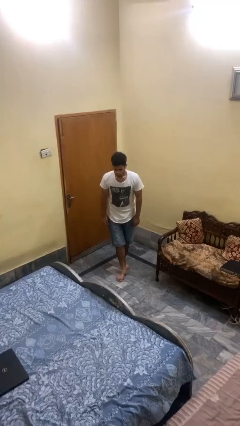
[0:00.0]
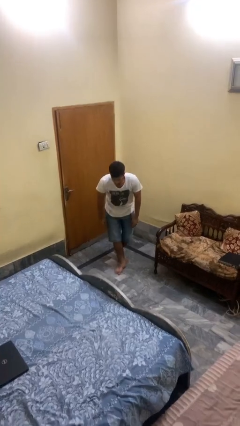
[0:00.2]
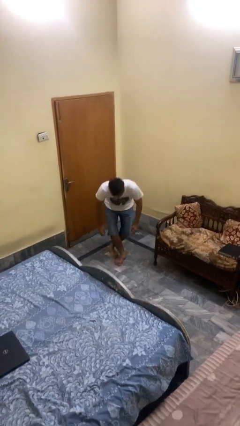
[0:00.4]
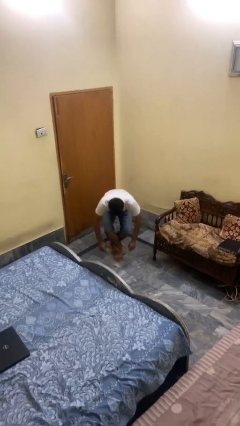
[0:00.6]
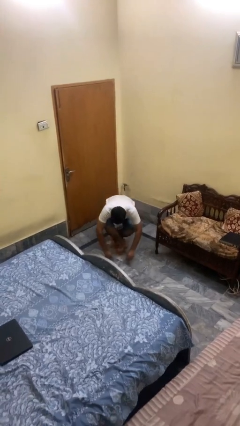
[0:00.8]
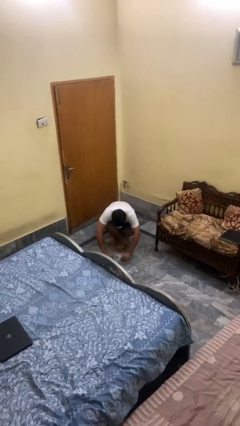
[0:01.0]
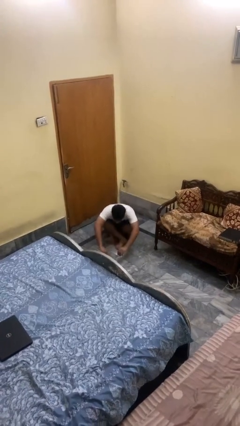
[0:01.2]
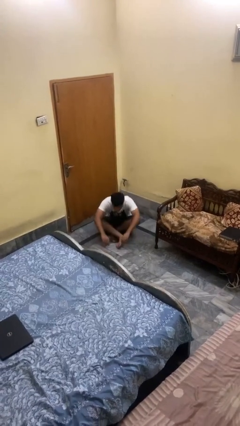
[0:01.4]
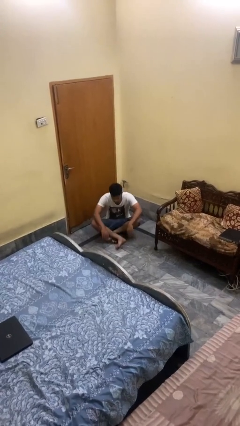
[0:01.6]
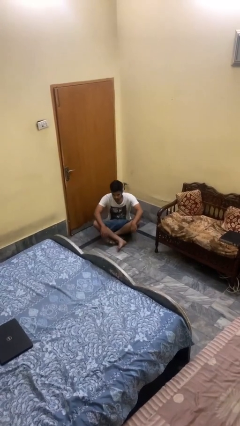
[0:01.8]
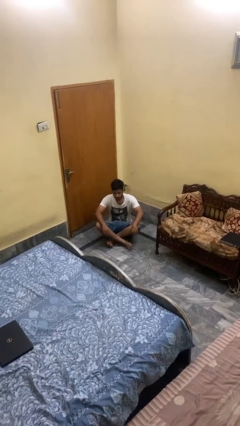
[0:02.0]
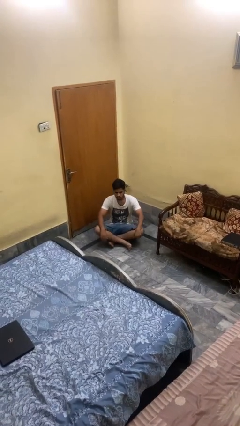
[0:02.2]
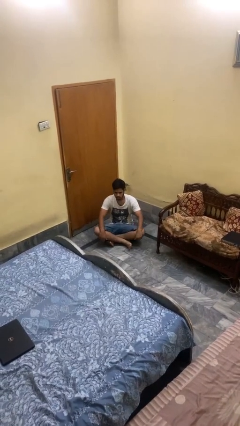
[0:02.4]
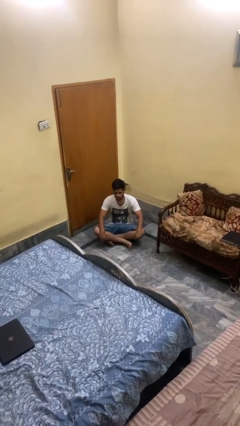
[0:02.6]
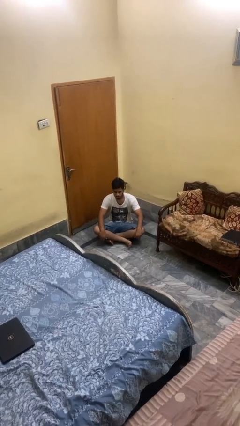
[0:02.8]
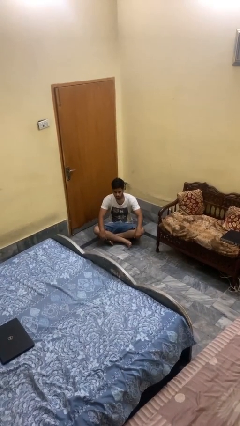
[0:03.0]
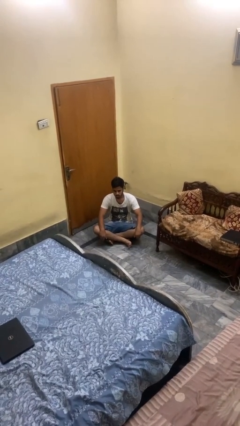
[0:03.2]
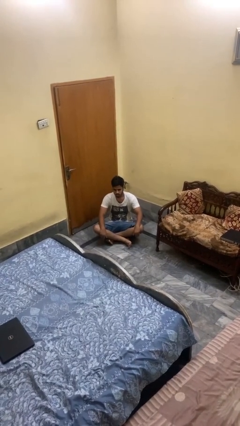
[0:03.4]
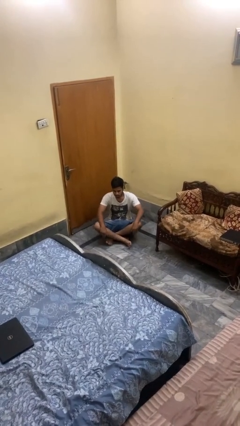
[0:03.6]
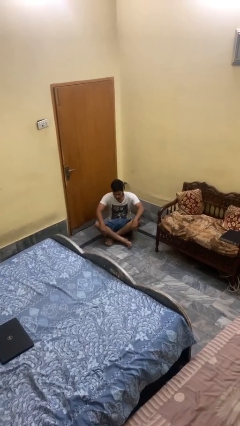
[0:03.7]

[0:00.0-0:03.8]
person sits crisscross

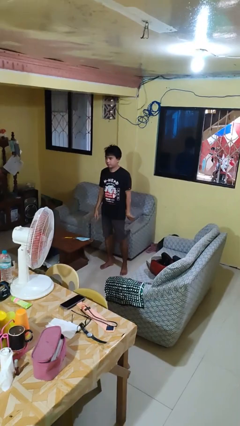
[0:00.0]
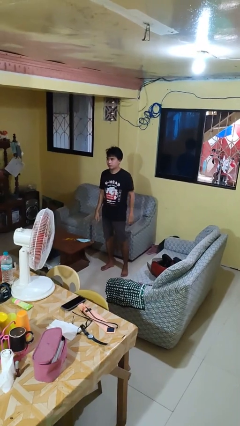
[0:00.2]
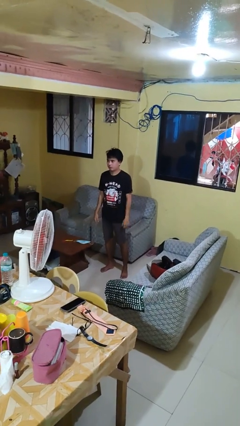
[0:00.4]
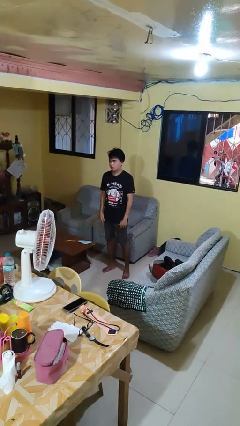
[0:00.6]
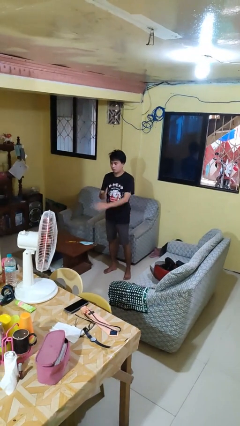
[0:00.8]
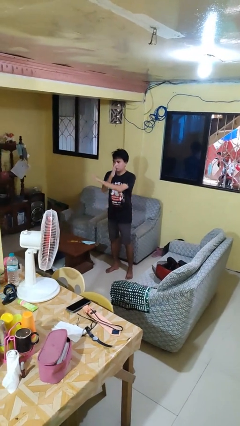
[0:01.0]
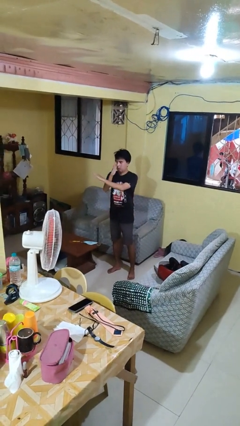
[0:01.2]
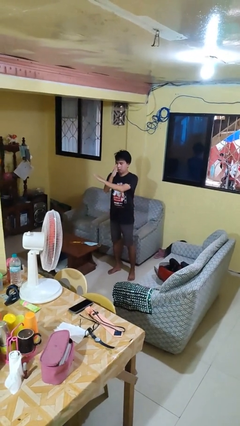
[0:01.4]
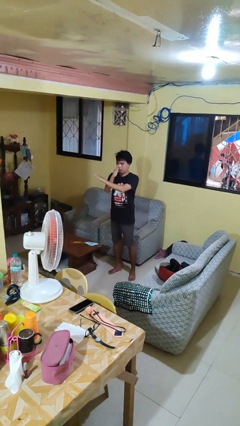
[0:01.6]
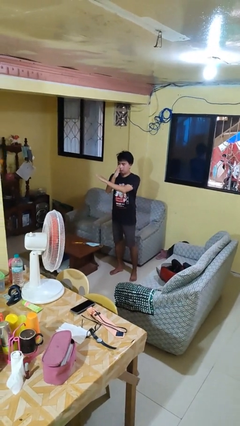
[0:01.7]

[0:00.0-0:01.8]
person gestures arms x

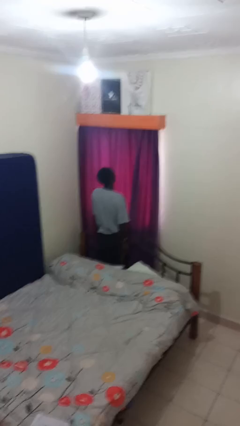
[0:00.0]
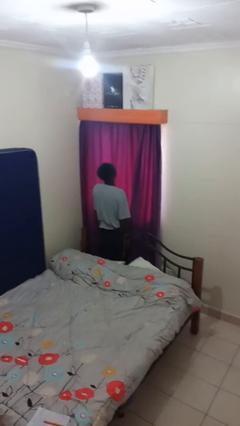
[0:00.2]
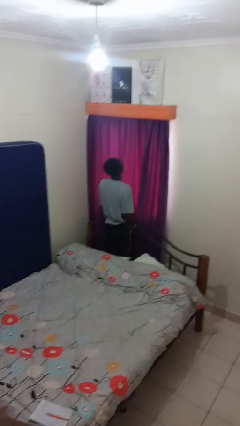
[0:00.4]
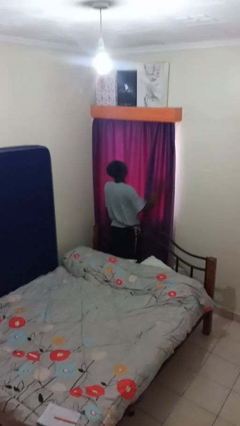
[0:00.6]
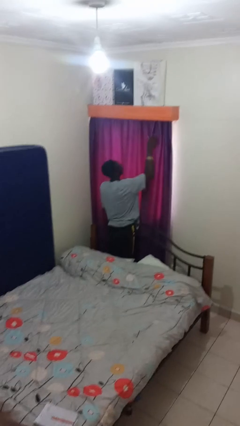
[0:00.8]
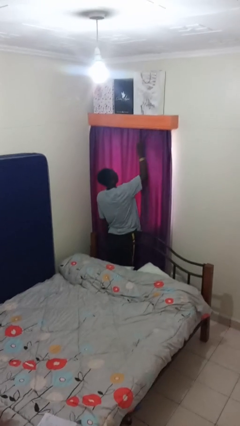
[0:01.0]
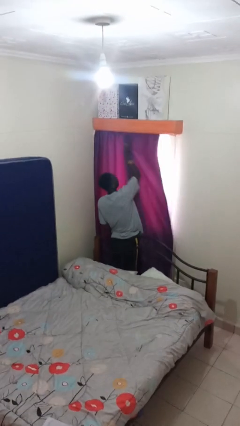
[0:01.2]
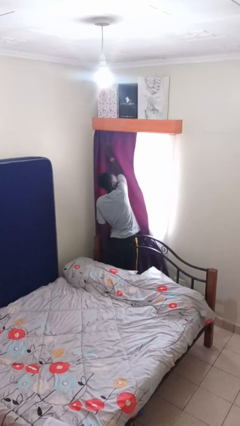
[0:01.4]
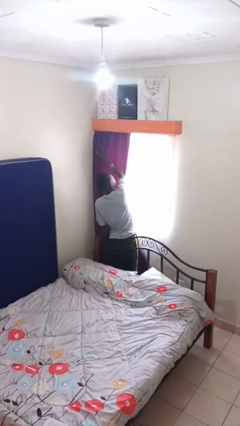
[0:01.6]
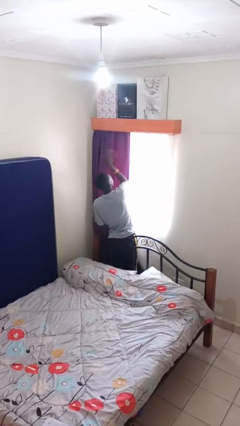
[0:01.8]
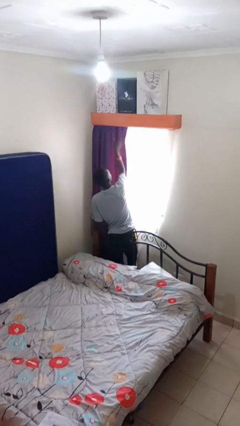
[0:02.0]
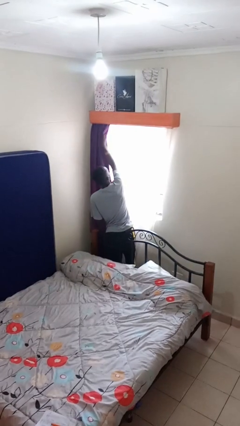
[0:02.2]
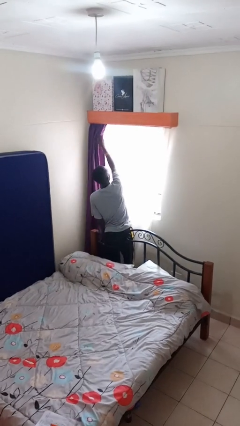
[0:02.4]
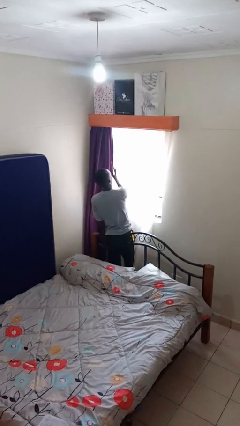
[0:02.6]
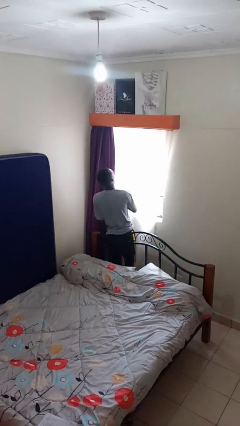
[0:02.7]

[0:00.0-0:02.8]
person opens curtains

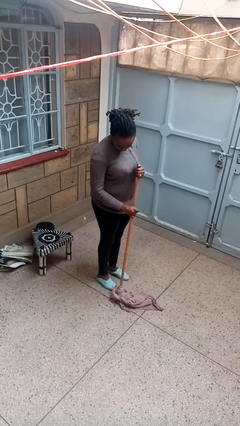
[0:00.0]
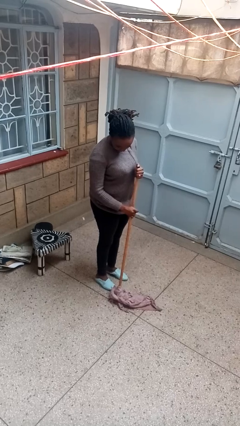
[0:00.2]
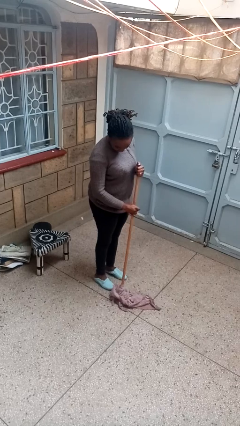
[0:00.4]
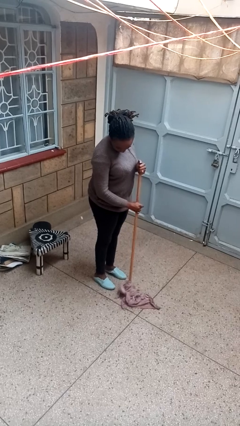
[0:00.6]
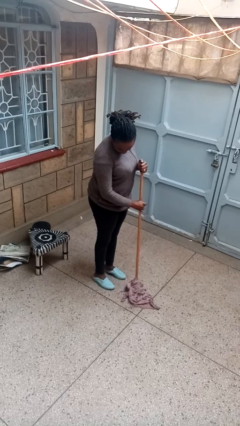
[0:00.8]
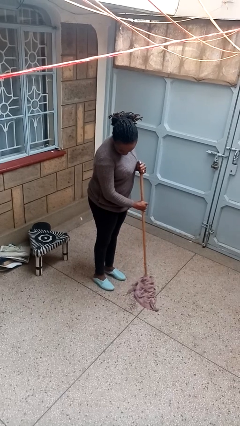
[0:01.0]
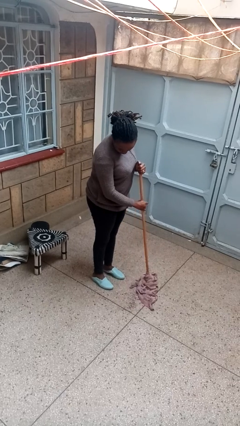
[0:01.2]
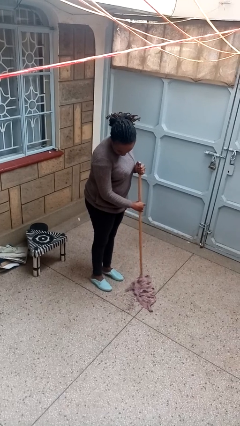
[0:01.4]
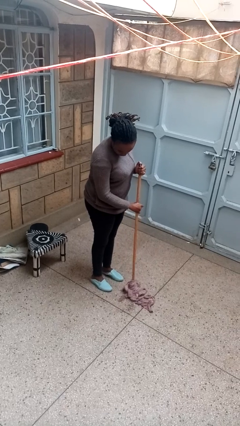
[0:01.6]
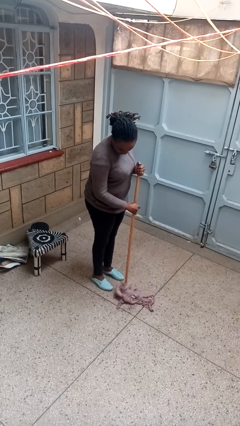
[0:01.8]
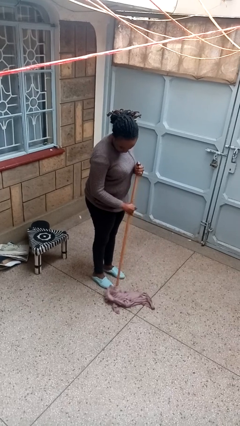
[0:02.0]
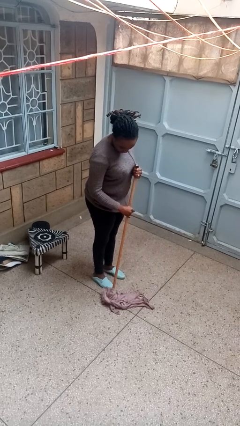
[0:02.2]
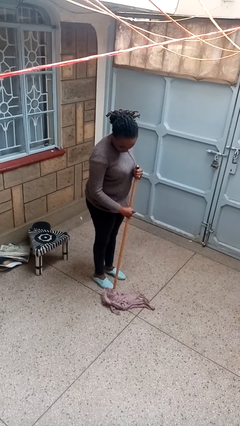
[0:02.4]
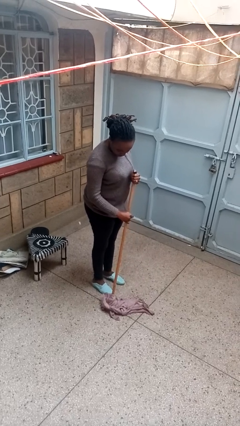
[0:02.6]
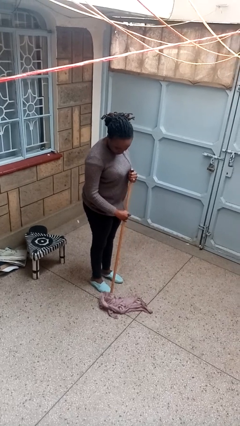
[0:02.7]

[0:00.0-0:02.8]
person mops

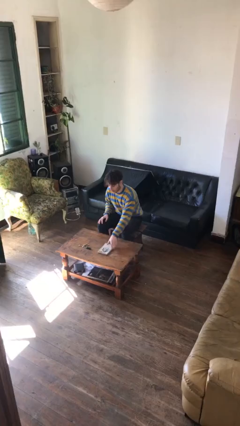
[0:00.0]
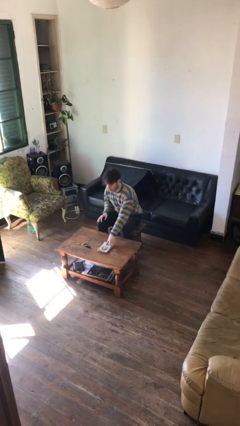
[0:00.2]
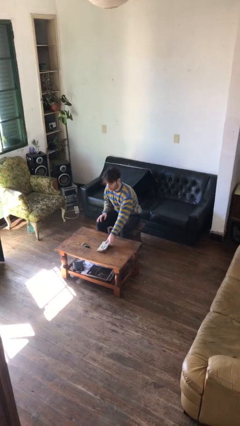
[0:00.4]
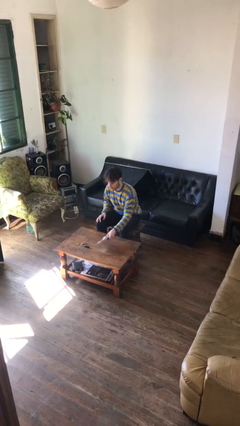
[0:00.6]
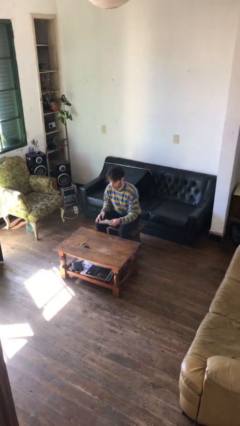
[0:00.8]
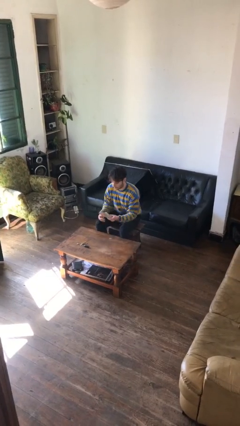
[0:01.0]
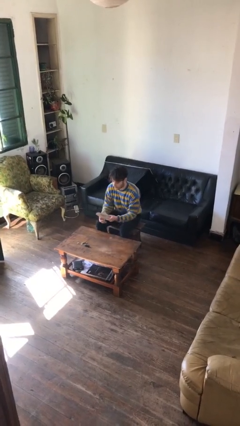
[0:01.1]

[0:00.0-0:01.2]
person picks up object from table

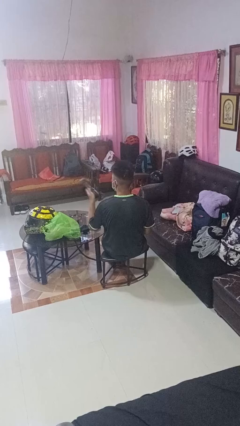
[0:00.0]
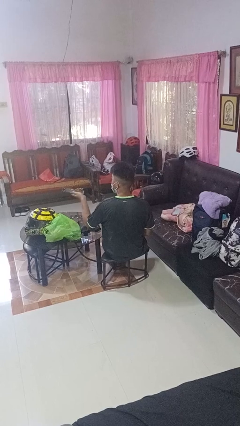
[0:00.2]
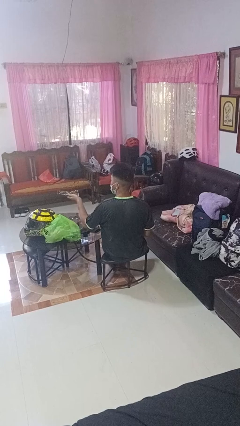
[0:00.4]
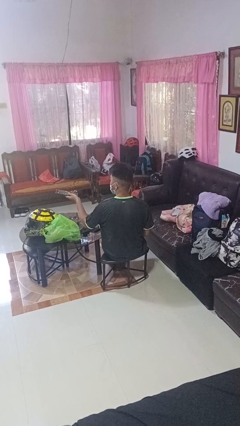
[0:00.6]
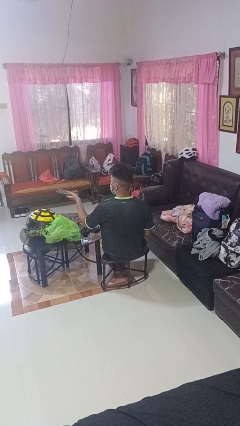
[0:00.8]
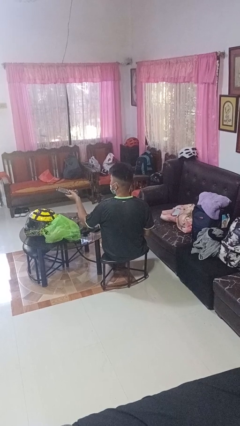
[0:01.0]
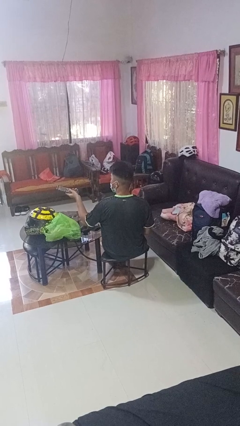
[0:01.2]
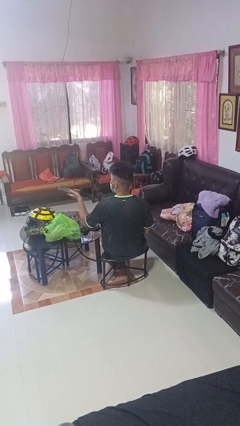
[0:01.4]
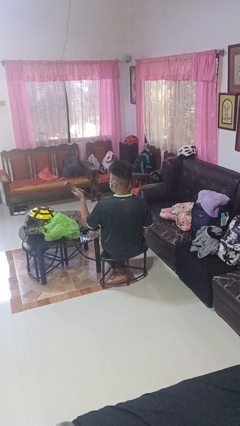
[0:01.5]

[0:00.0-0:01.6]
person uses television remote

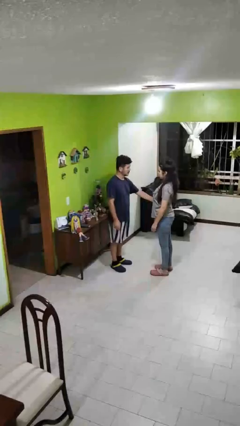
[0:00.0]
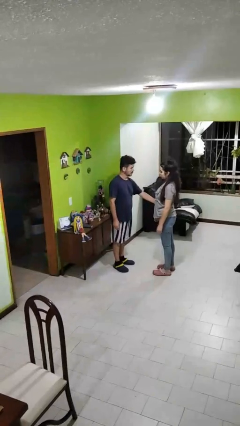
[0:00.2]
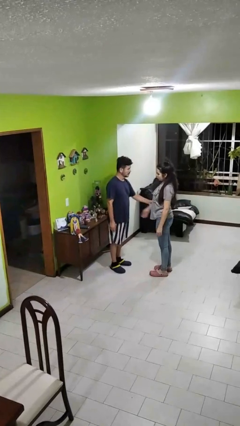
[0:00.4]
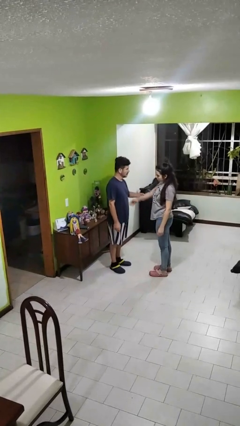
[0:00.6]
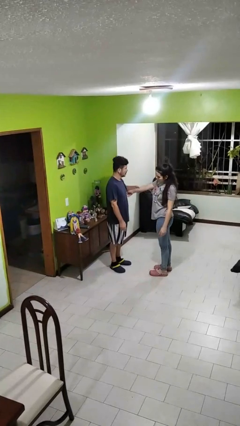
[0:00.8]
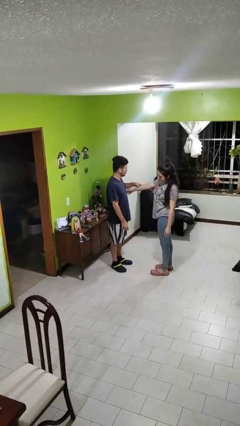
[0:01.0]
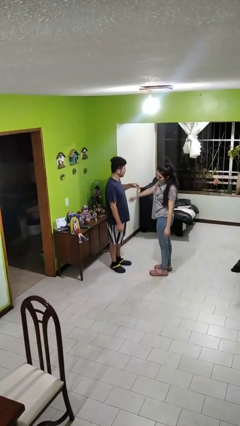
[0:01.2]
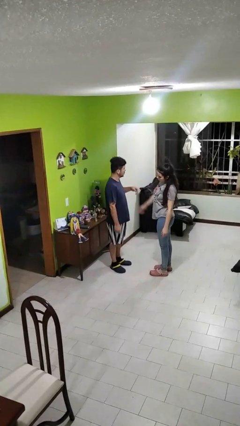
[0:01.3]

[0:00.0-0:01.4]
person grabs person by forearm

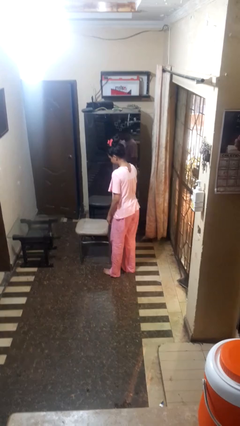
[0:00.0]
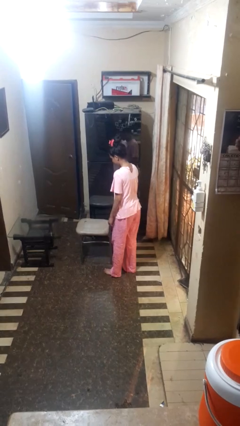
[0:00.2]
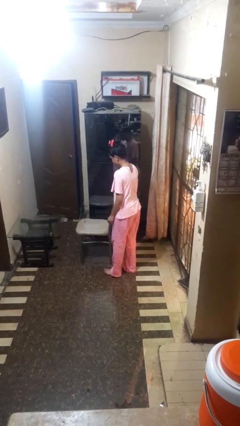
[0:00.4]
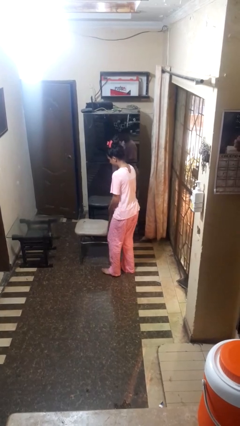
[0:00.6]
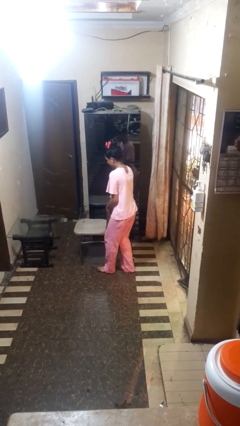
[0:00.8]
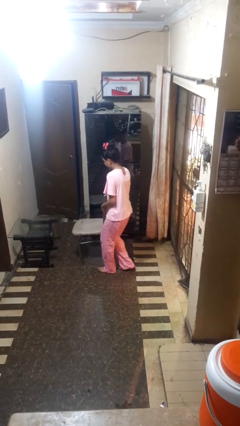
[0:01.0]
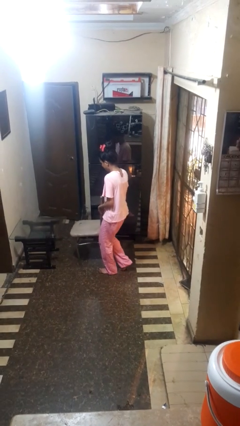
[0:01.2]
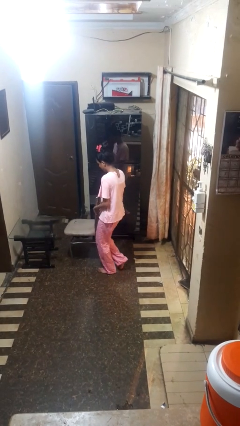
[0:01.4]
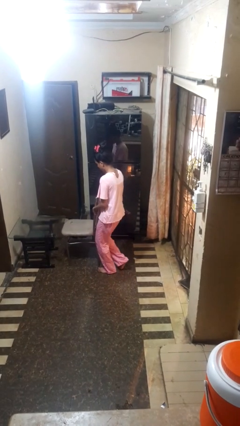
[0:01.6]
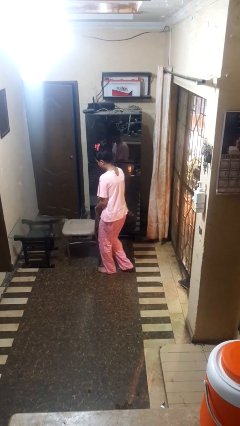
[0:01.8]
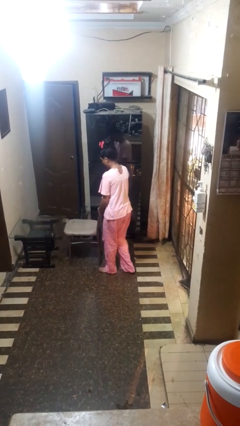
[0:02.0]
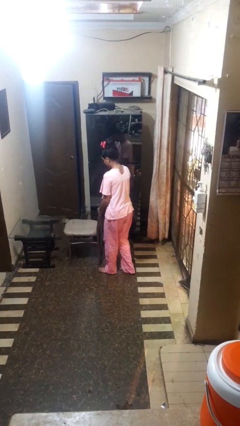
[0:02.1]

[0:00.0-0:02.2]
person pushes in chair
